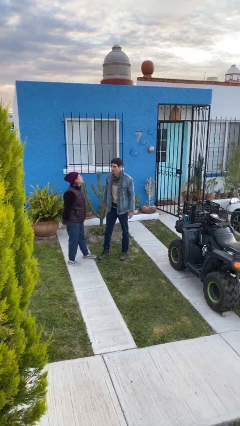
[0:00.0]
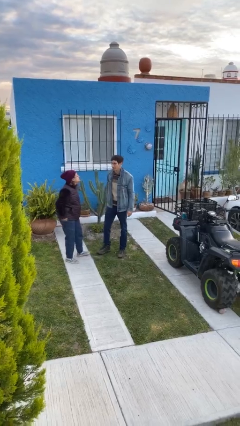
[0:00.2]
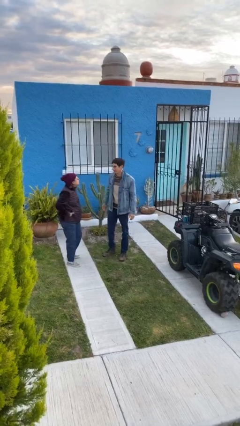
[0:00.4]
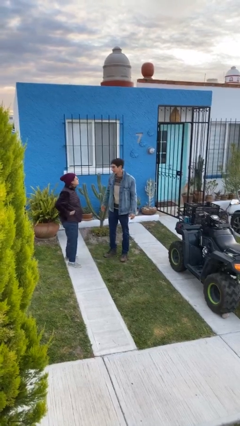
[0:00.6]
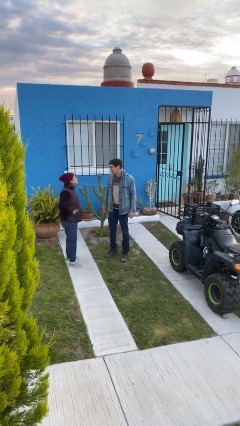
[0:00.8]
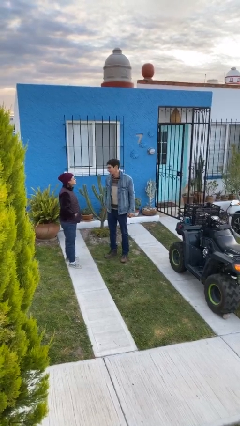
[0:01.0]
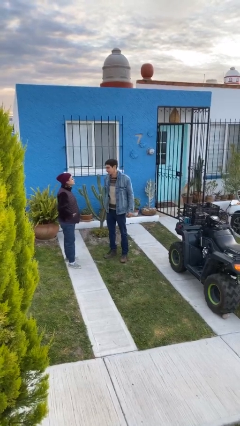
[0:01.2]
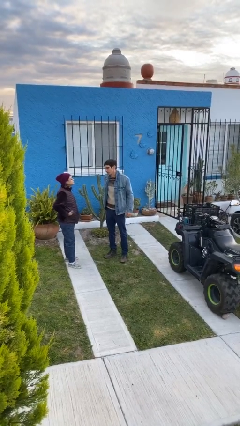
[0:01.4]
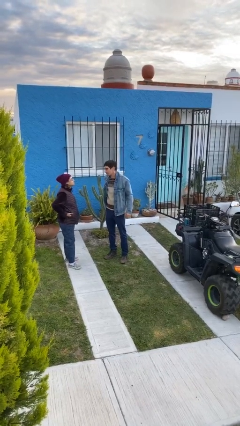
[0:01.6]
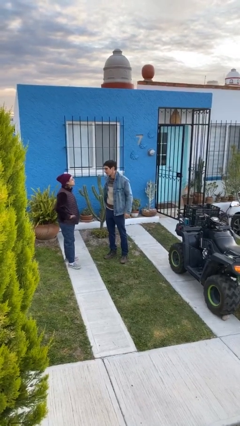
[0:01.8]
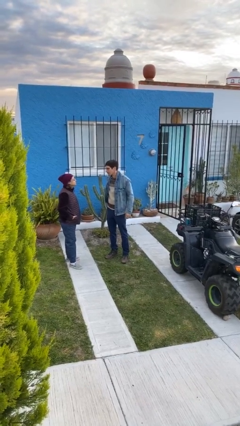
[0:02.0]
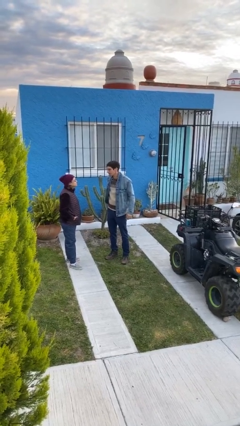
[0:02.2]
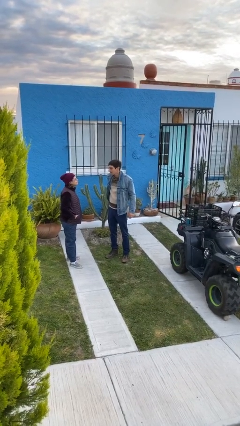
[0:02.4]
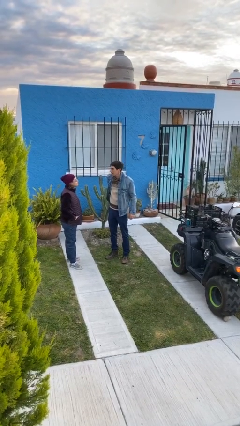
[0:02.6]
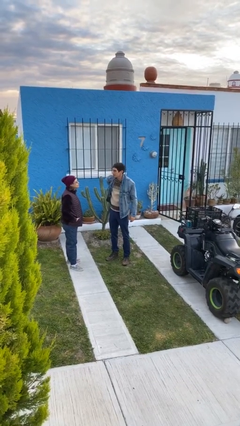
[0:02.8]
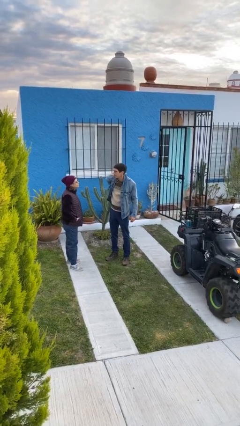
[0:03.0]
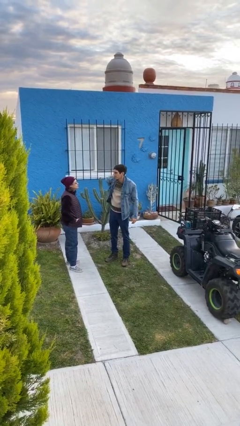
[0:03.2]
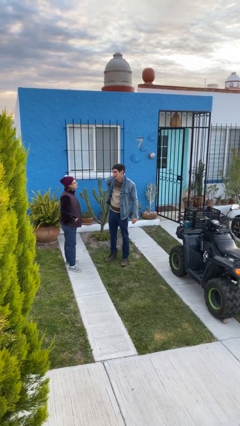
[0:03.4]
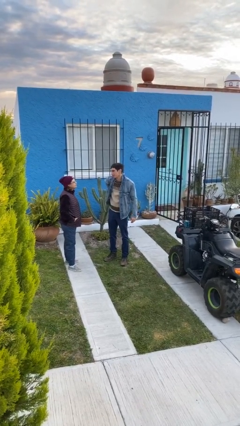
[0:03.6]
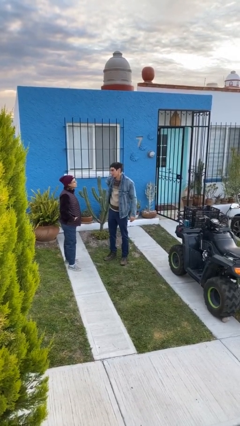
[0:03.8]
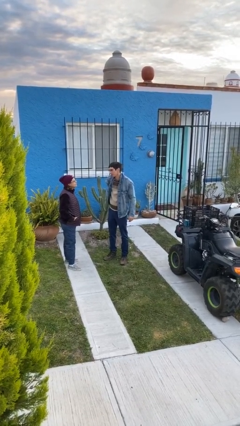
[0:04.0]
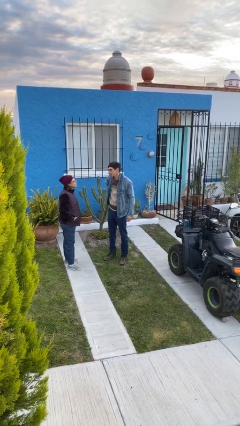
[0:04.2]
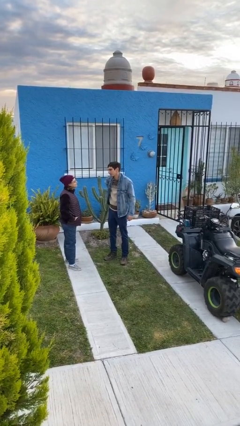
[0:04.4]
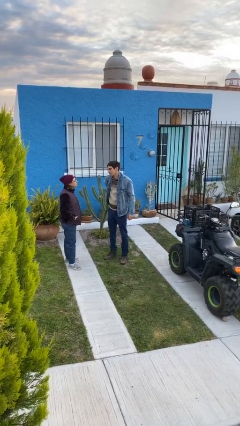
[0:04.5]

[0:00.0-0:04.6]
person talks to person

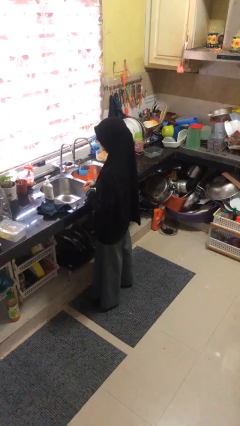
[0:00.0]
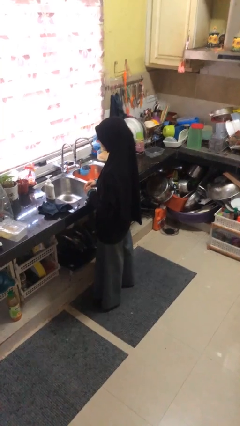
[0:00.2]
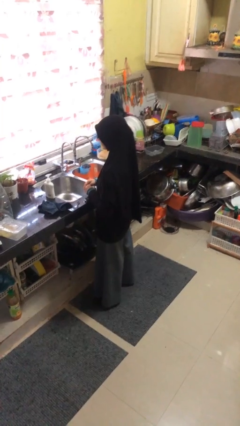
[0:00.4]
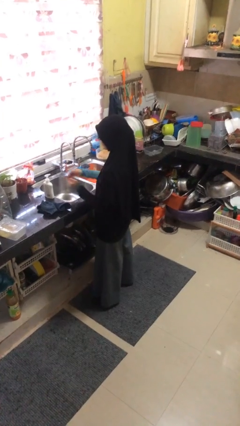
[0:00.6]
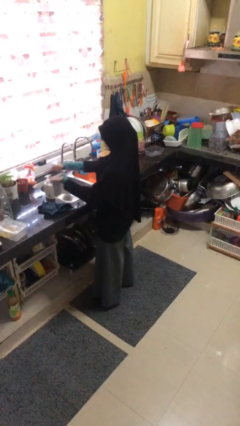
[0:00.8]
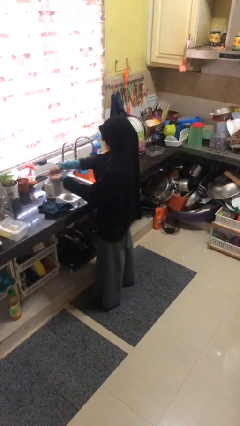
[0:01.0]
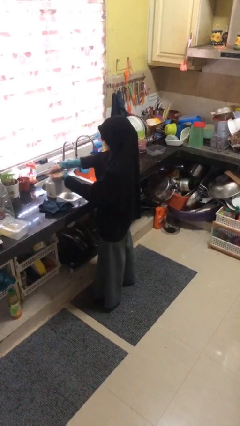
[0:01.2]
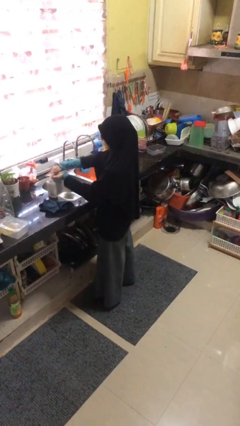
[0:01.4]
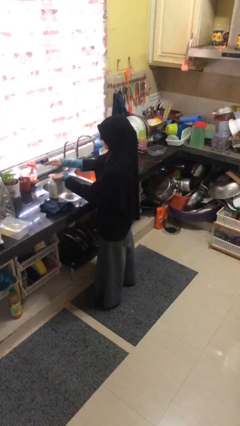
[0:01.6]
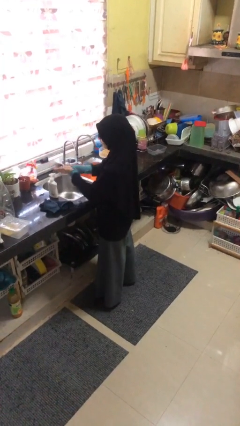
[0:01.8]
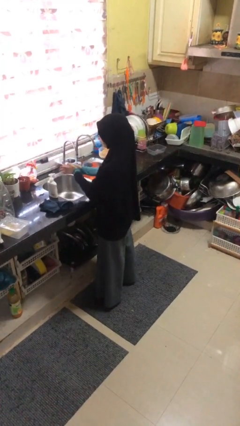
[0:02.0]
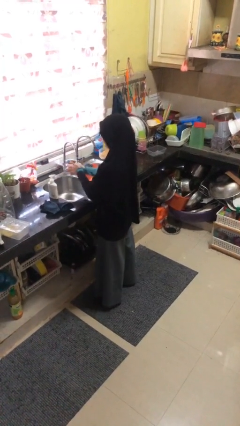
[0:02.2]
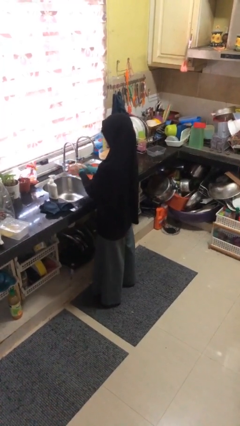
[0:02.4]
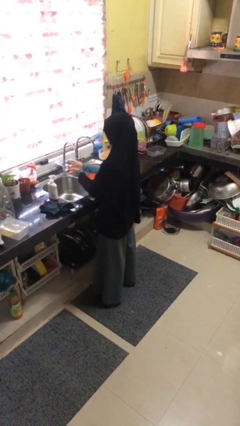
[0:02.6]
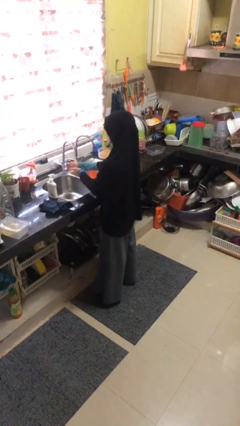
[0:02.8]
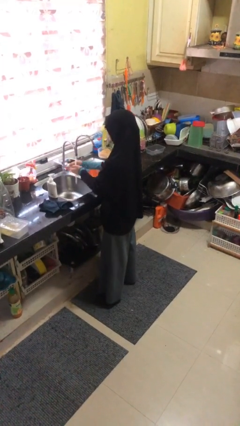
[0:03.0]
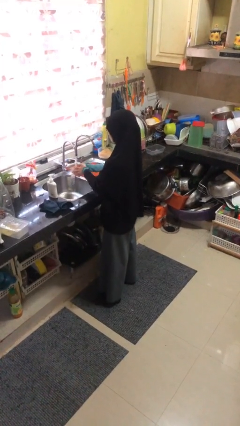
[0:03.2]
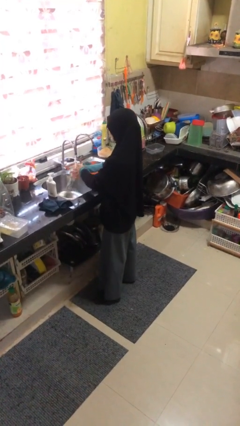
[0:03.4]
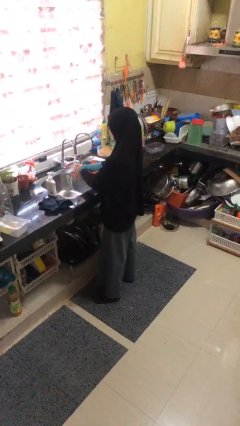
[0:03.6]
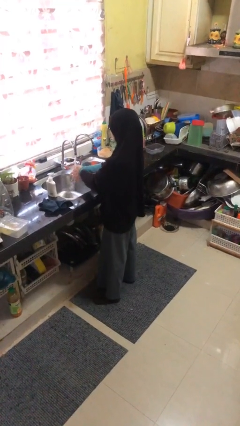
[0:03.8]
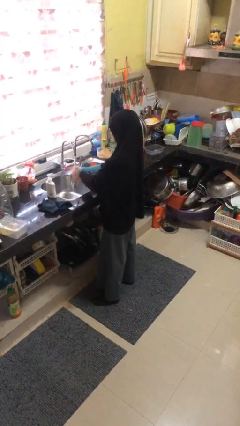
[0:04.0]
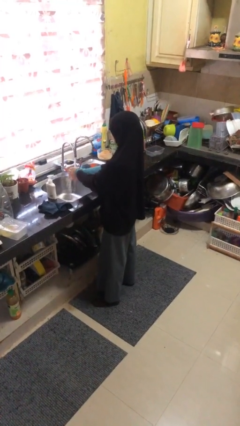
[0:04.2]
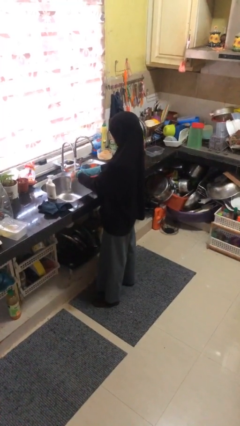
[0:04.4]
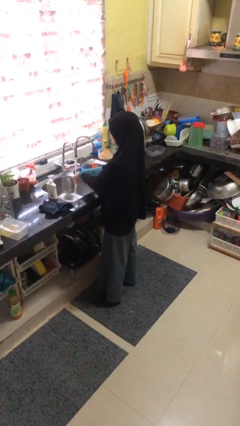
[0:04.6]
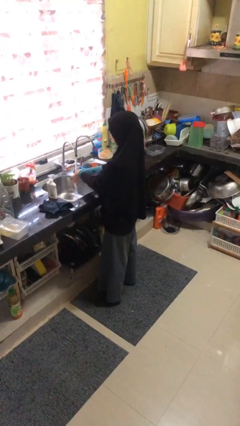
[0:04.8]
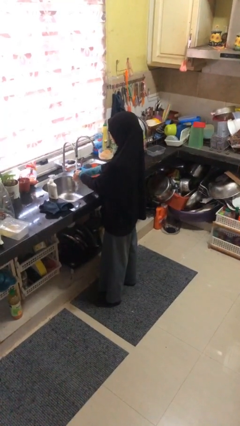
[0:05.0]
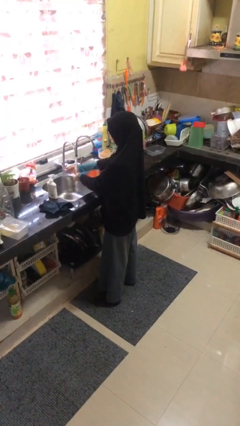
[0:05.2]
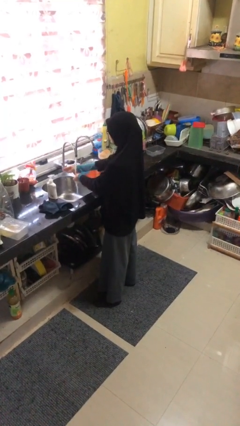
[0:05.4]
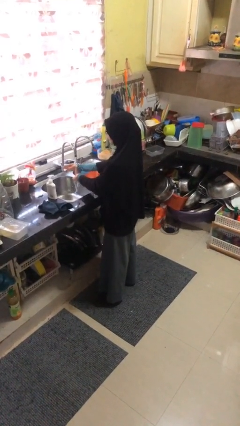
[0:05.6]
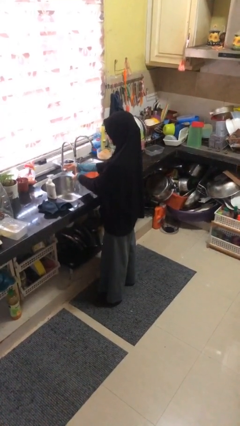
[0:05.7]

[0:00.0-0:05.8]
person washes hands

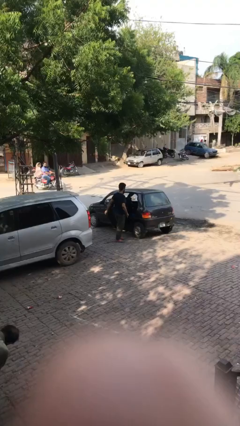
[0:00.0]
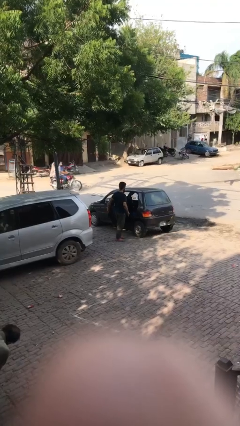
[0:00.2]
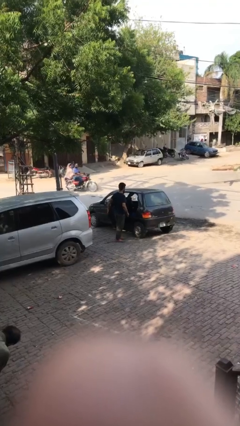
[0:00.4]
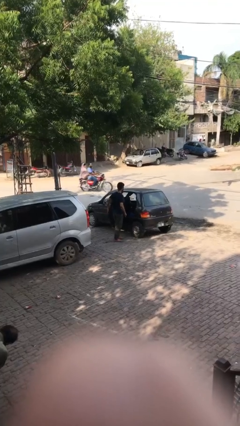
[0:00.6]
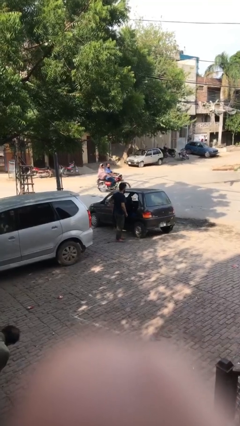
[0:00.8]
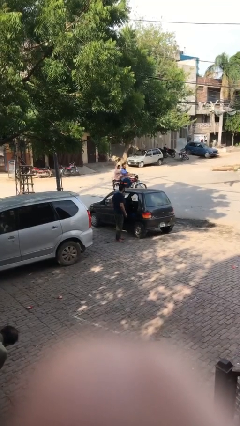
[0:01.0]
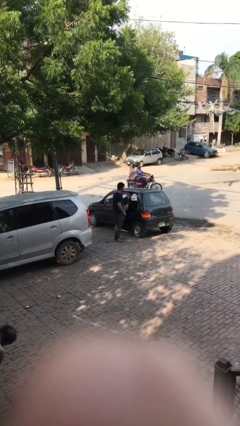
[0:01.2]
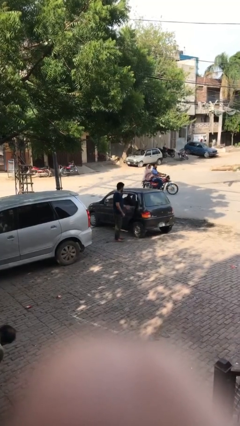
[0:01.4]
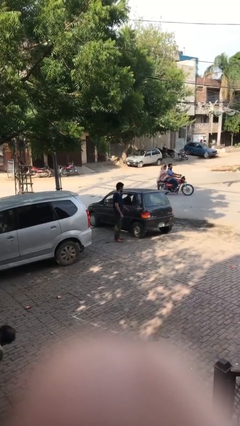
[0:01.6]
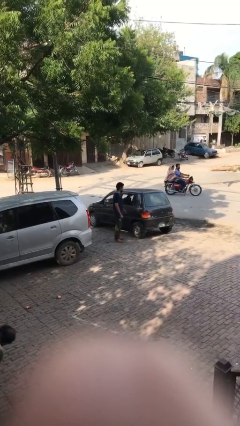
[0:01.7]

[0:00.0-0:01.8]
person closes car door

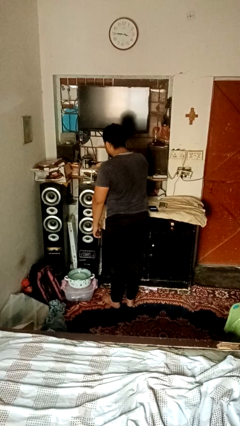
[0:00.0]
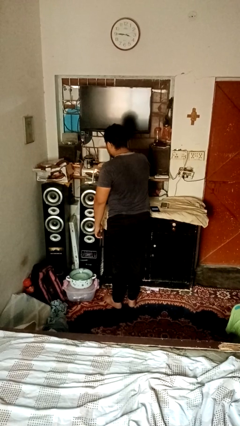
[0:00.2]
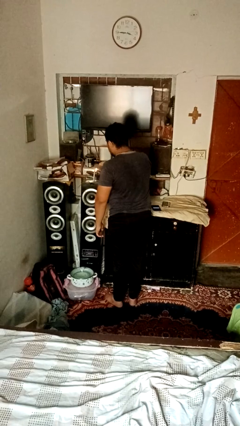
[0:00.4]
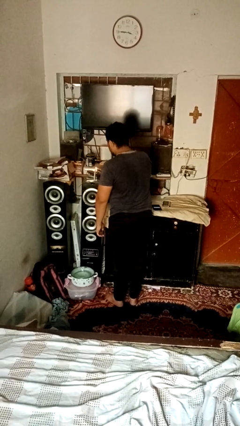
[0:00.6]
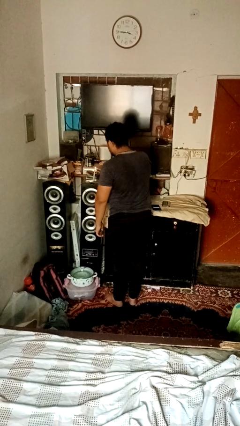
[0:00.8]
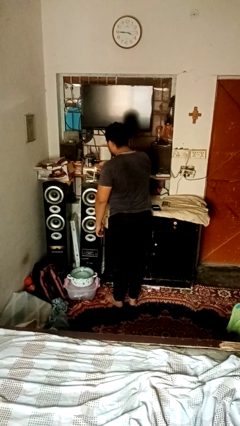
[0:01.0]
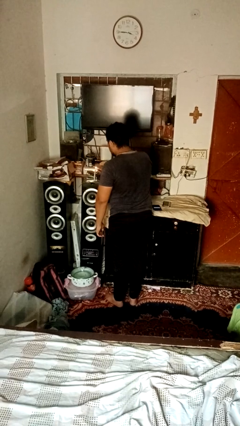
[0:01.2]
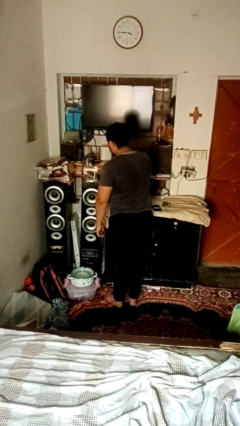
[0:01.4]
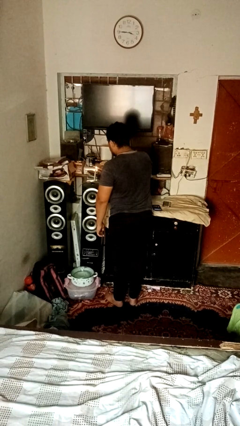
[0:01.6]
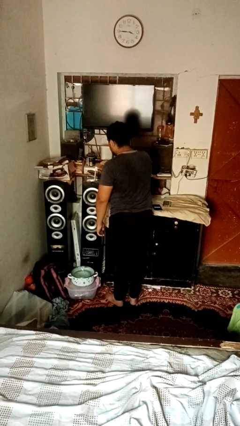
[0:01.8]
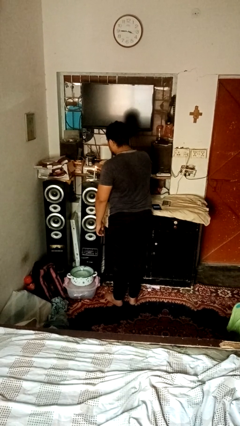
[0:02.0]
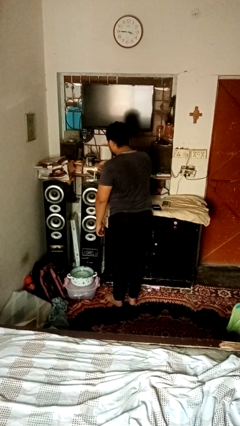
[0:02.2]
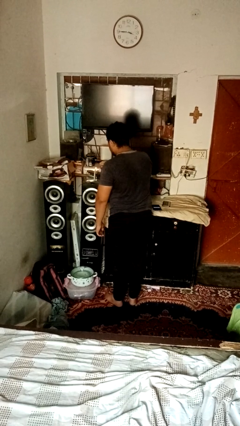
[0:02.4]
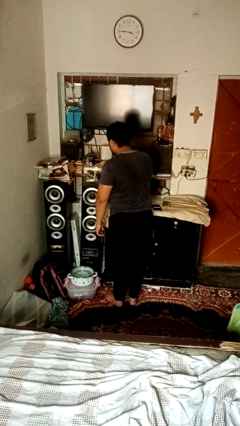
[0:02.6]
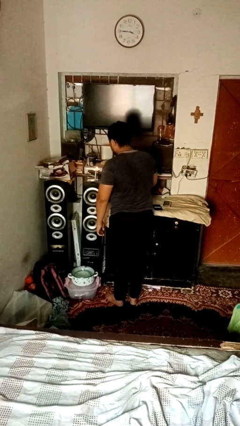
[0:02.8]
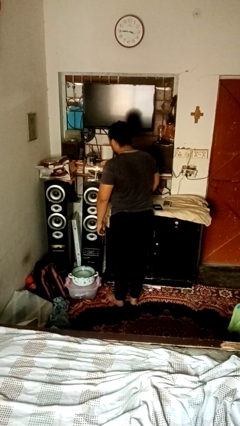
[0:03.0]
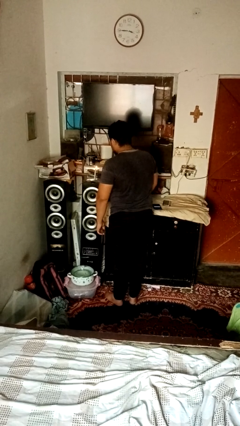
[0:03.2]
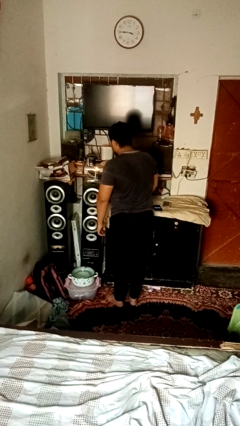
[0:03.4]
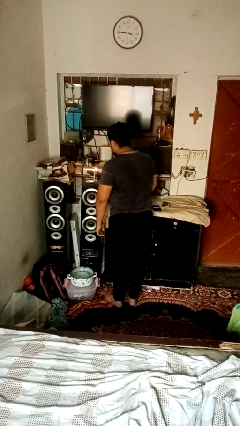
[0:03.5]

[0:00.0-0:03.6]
person lights candle

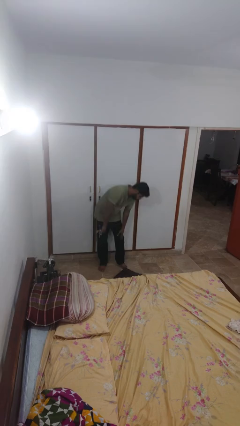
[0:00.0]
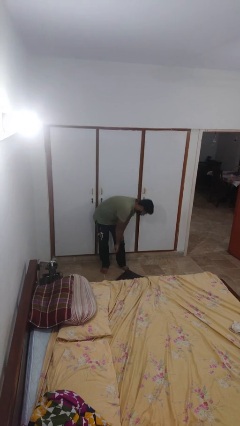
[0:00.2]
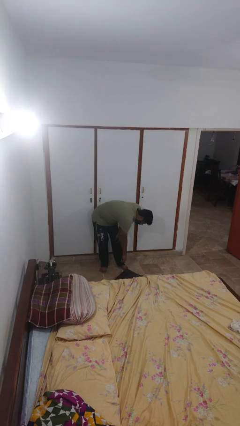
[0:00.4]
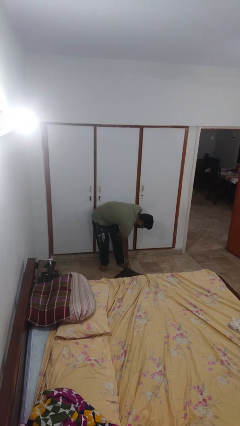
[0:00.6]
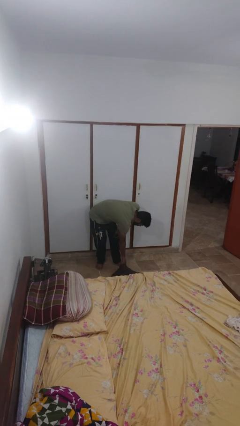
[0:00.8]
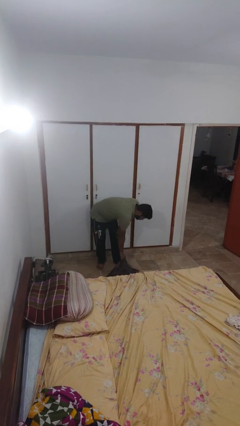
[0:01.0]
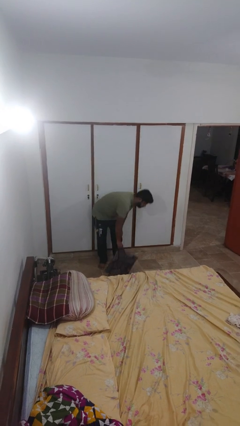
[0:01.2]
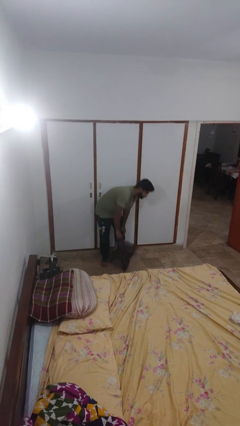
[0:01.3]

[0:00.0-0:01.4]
person picks up object from floor

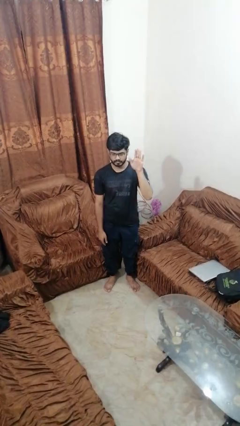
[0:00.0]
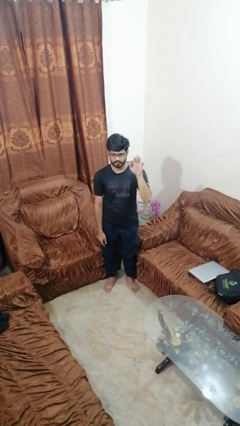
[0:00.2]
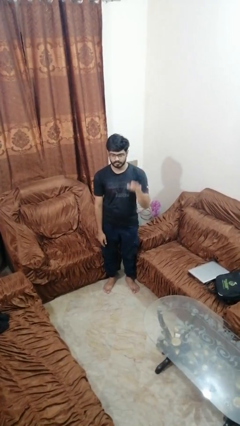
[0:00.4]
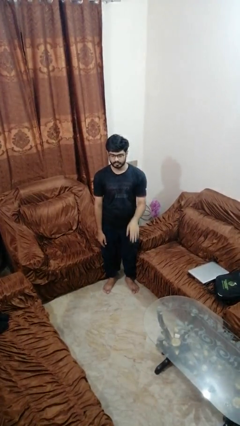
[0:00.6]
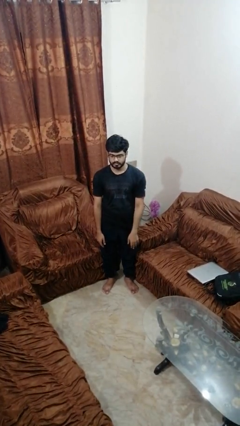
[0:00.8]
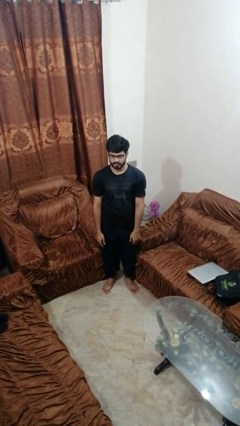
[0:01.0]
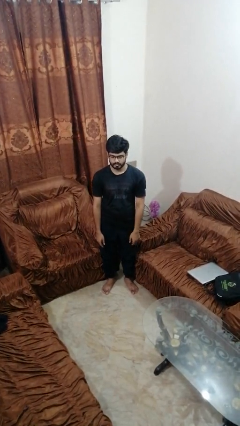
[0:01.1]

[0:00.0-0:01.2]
person gestures lower hand
